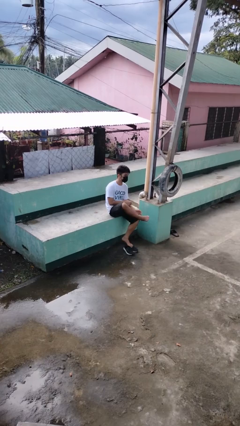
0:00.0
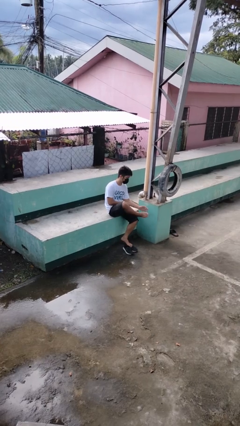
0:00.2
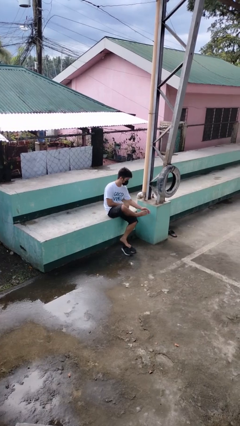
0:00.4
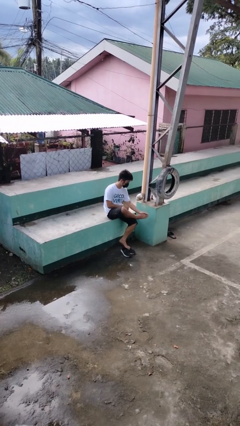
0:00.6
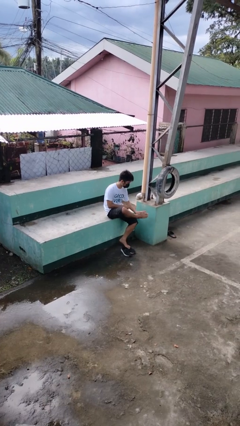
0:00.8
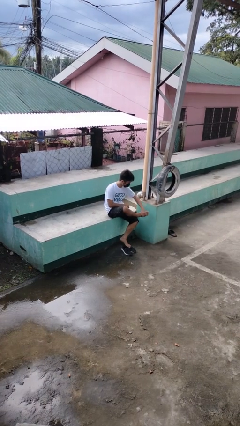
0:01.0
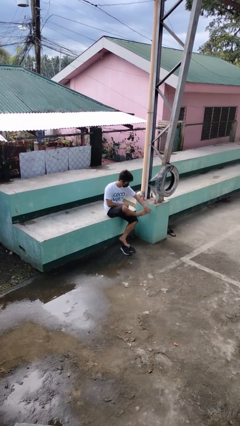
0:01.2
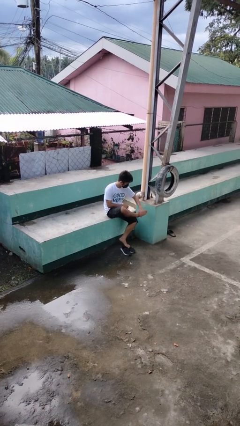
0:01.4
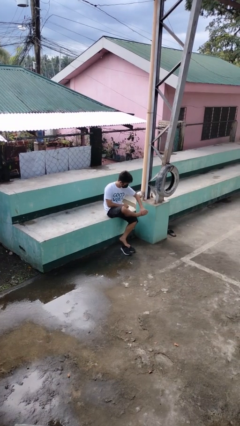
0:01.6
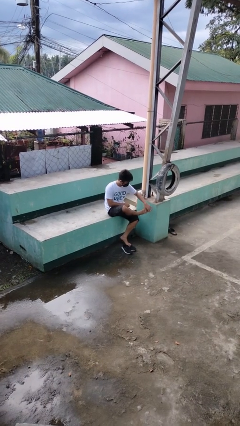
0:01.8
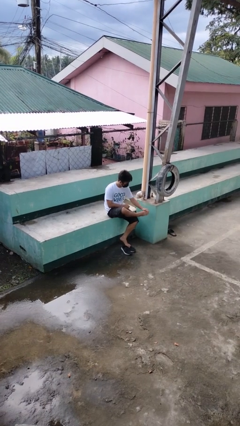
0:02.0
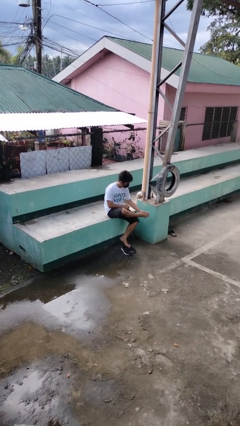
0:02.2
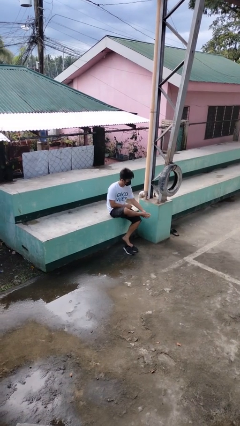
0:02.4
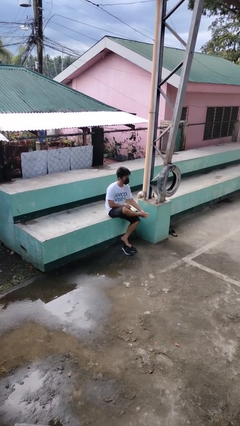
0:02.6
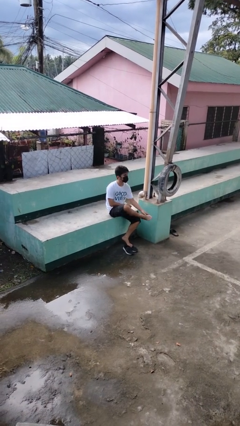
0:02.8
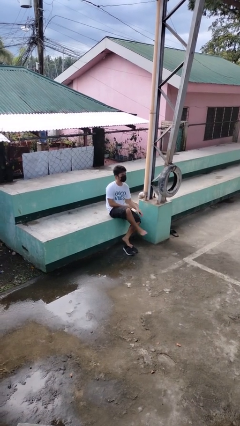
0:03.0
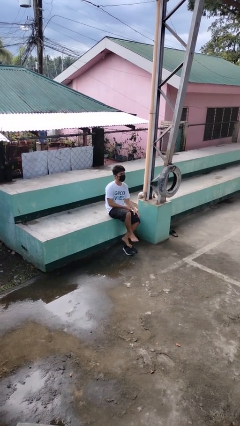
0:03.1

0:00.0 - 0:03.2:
person rubs foot

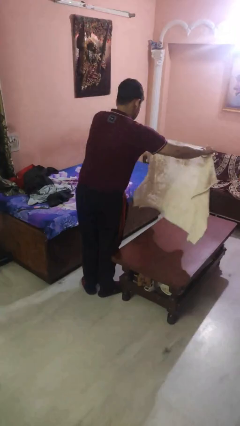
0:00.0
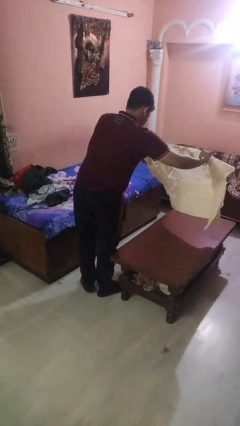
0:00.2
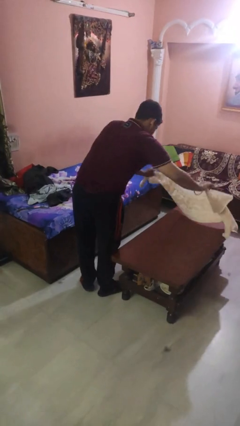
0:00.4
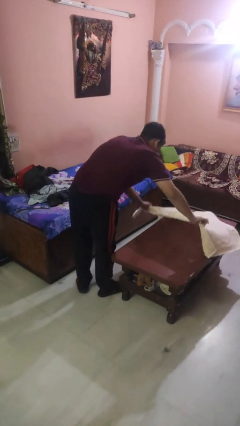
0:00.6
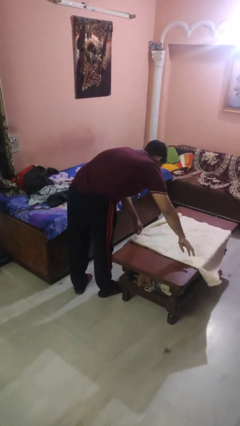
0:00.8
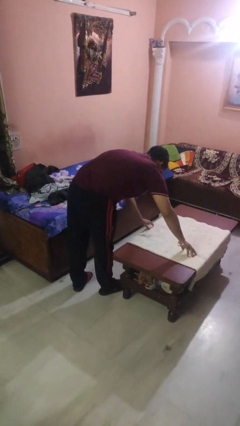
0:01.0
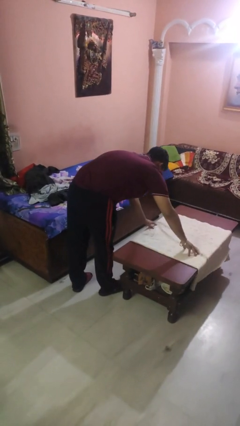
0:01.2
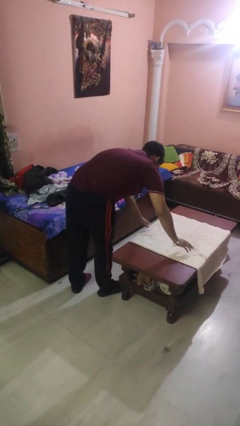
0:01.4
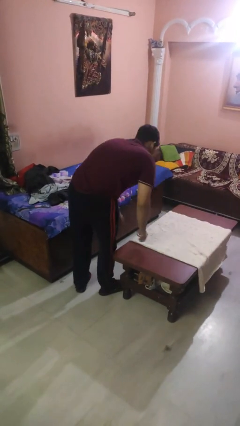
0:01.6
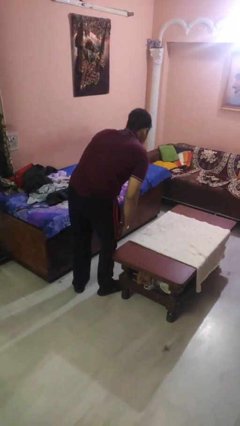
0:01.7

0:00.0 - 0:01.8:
person spreads tablecloth

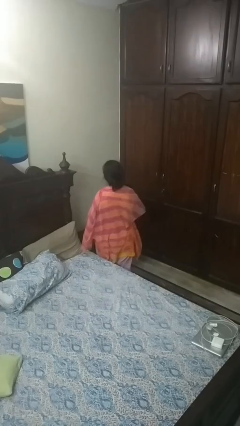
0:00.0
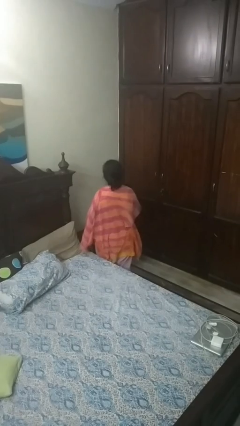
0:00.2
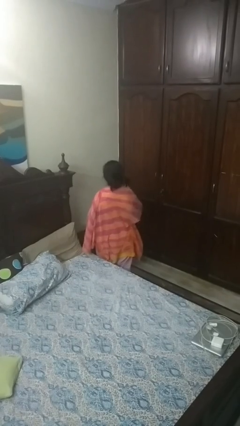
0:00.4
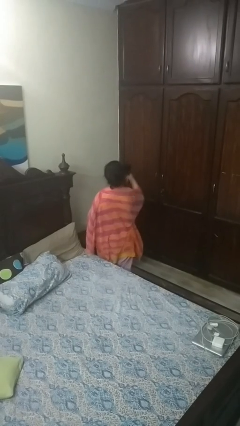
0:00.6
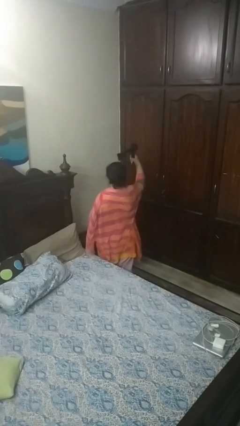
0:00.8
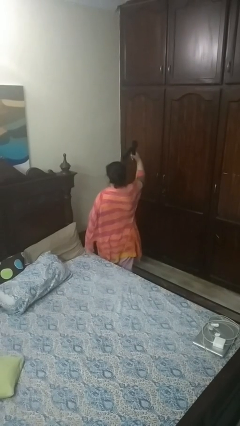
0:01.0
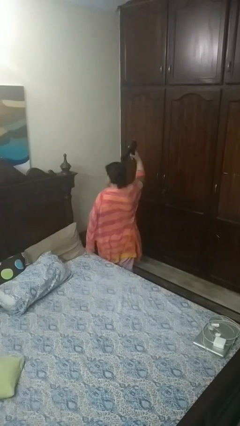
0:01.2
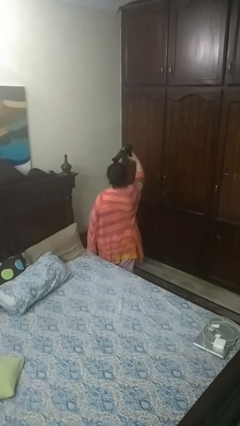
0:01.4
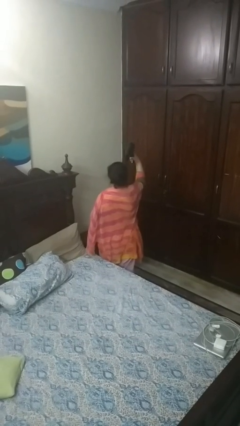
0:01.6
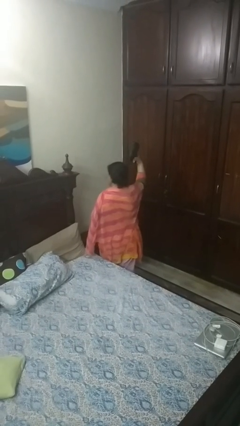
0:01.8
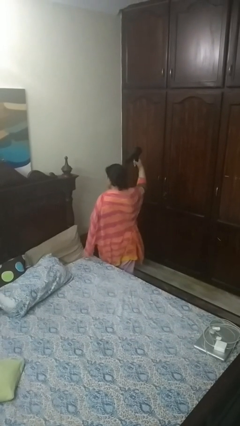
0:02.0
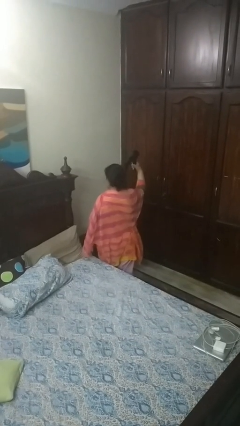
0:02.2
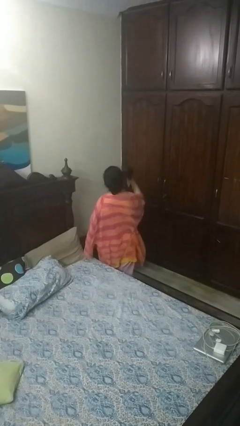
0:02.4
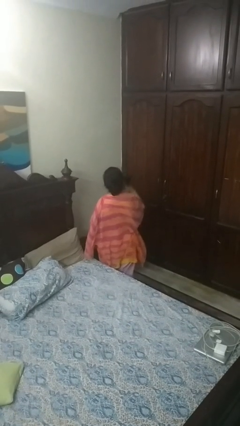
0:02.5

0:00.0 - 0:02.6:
person dries hair with hairdryer

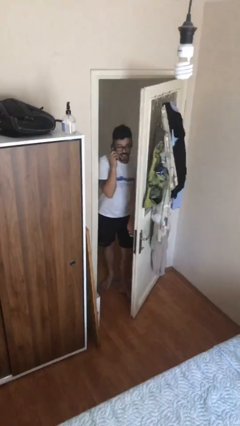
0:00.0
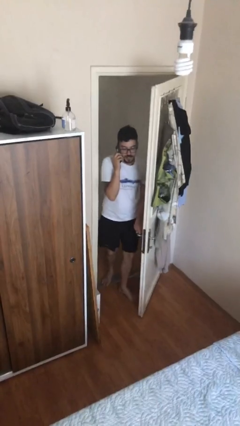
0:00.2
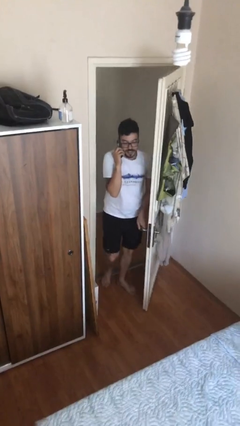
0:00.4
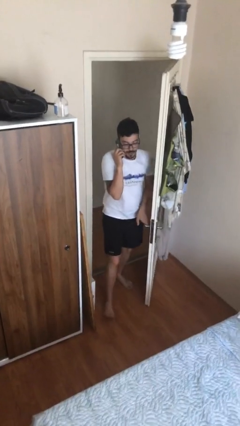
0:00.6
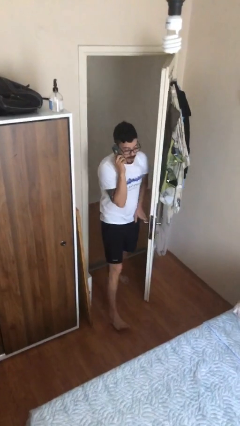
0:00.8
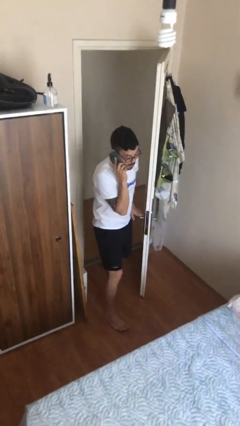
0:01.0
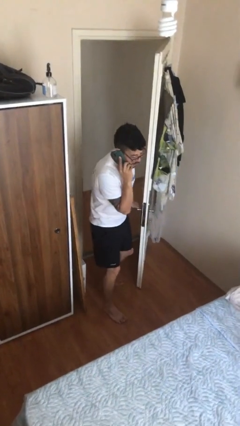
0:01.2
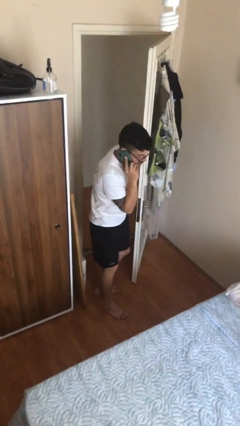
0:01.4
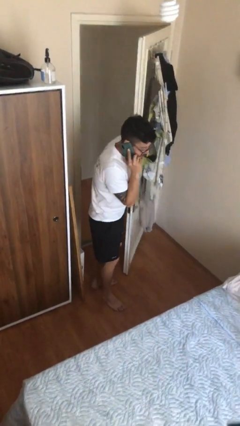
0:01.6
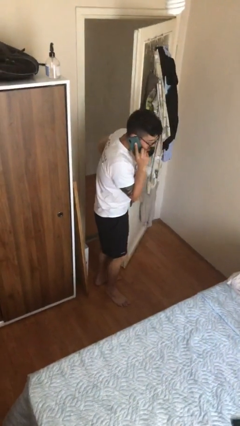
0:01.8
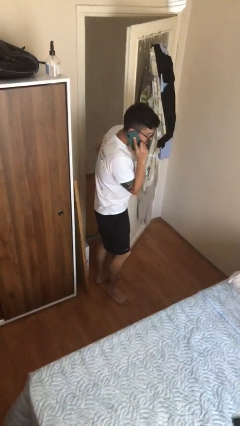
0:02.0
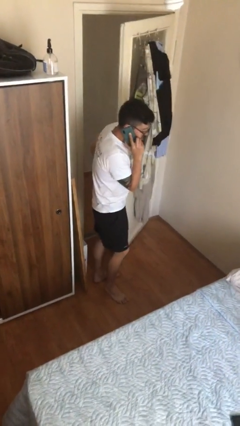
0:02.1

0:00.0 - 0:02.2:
person enters scene through structure

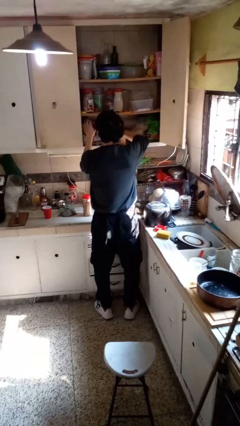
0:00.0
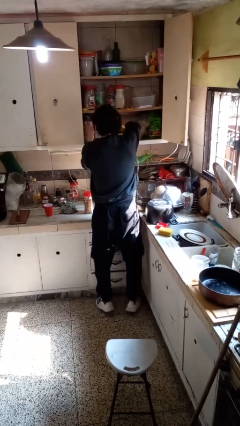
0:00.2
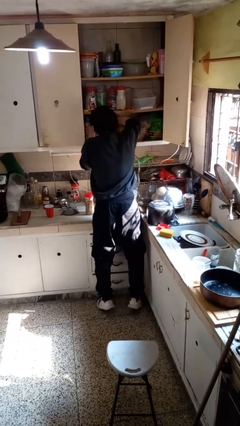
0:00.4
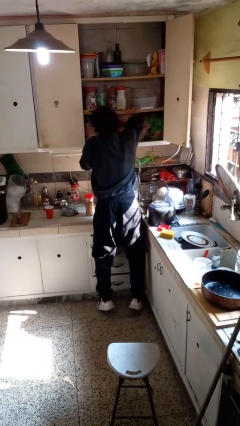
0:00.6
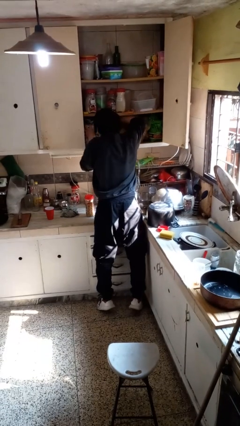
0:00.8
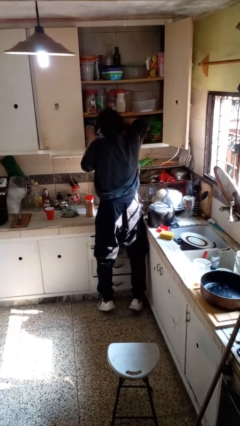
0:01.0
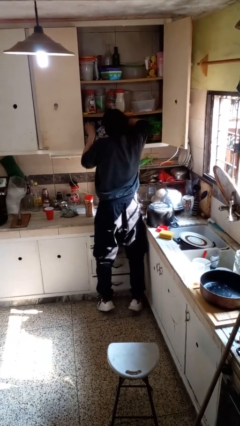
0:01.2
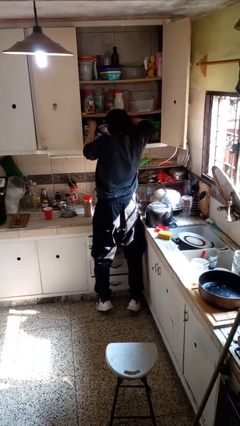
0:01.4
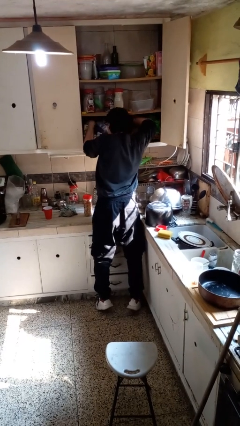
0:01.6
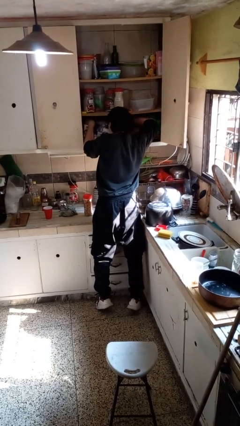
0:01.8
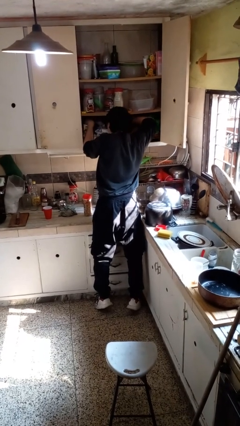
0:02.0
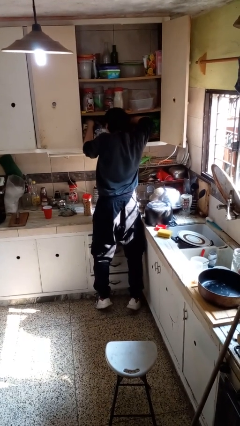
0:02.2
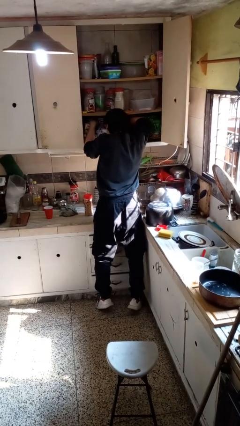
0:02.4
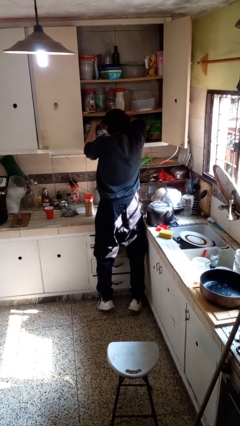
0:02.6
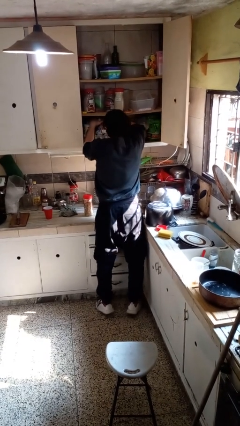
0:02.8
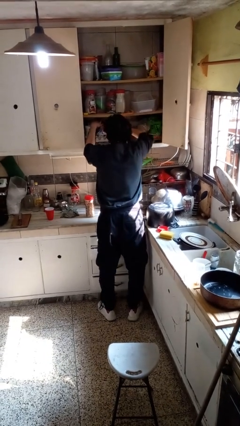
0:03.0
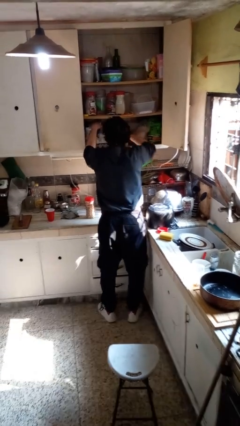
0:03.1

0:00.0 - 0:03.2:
person searches in cabinet

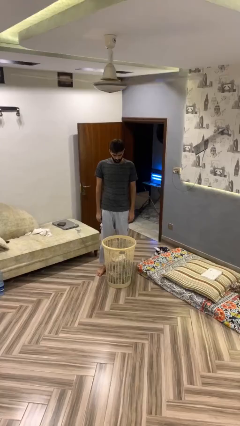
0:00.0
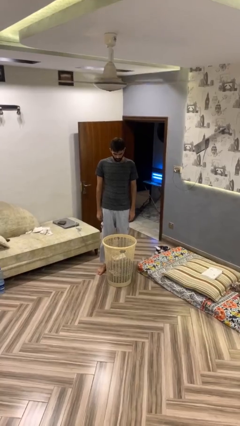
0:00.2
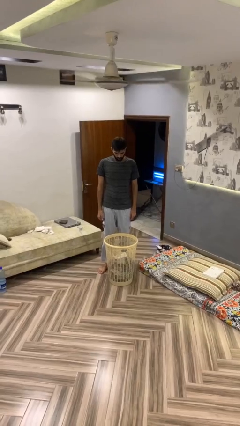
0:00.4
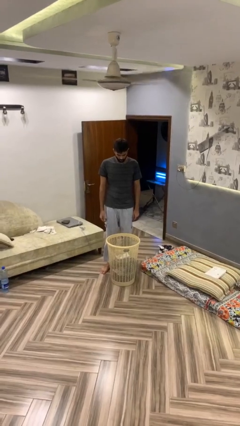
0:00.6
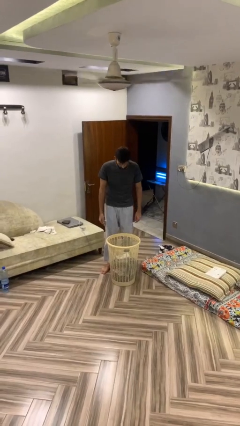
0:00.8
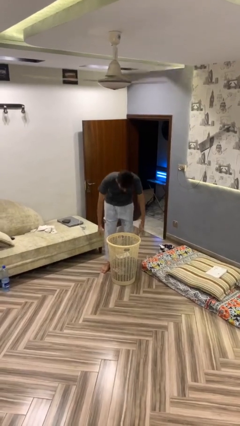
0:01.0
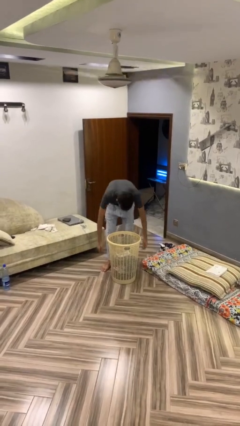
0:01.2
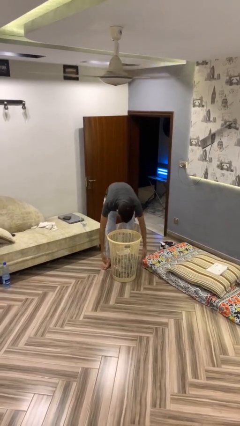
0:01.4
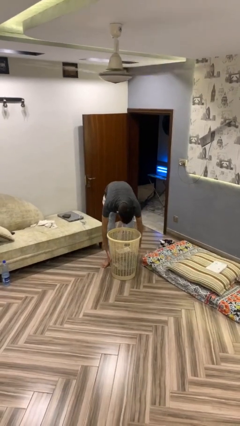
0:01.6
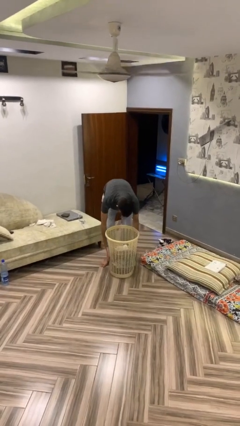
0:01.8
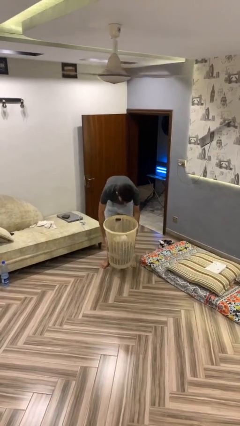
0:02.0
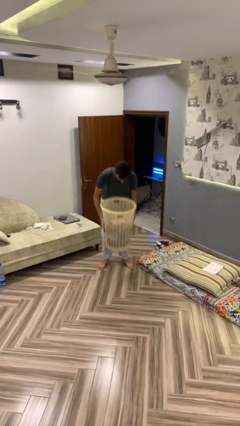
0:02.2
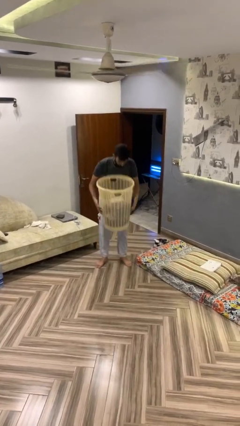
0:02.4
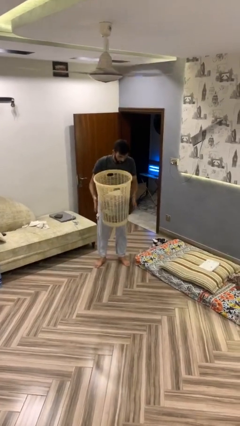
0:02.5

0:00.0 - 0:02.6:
person picks up object from floor

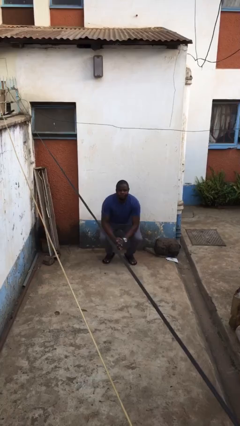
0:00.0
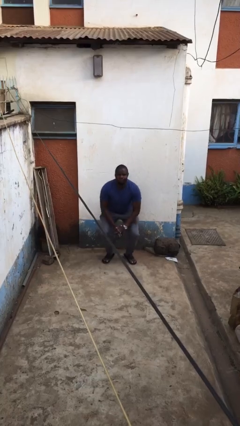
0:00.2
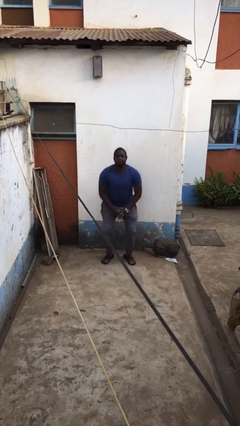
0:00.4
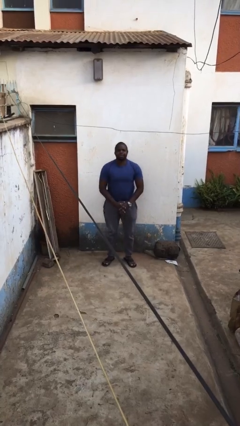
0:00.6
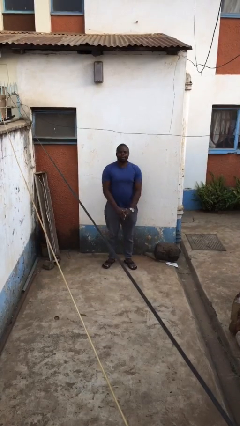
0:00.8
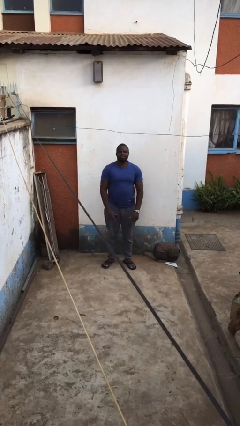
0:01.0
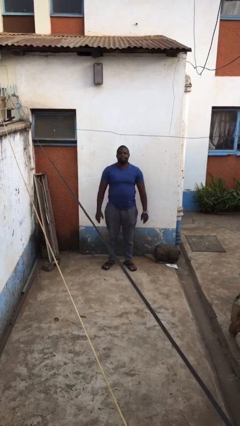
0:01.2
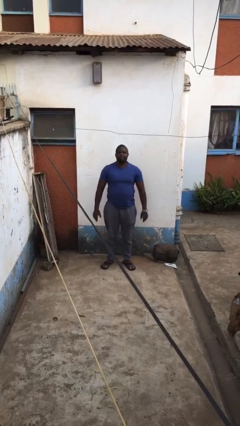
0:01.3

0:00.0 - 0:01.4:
person stands up

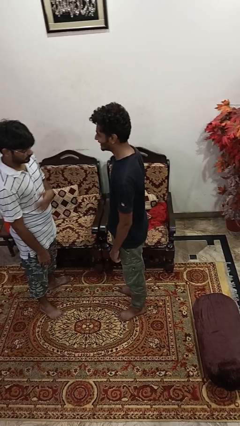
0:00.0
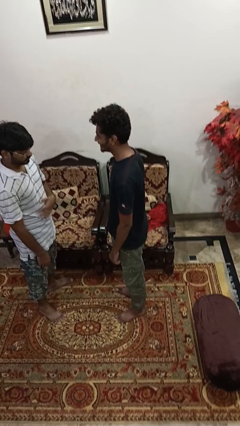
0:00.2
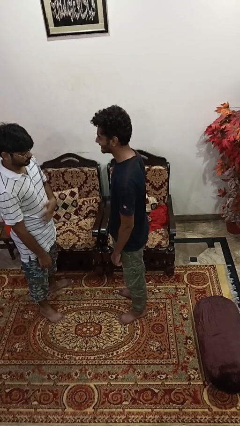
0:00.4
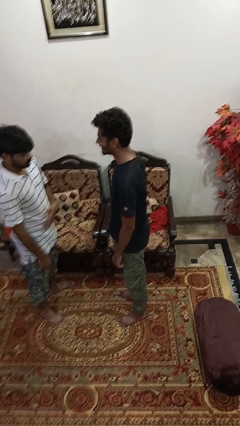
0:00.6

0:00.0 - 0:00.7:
person spins person around
